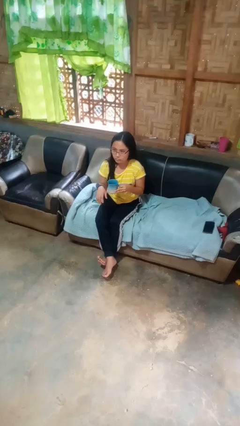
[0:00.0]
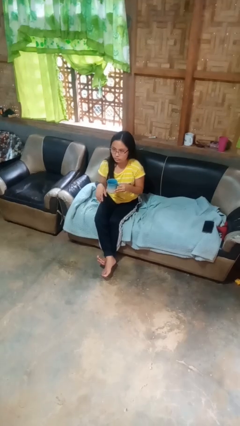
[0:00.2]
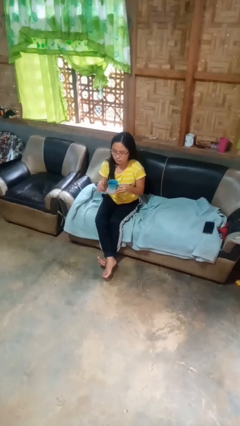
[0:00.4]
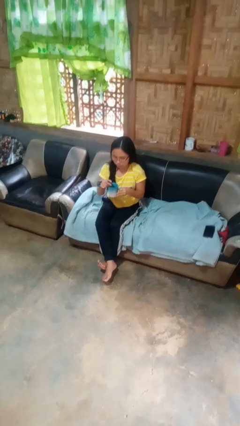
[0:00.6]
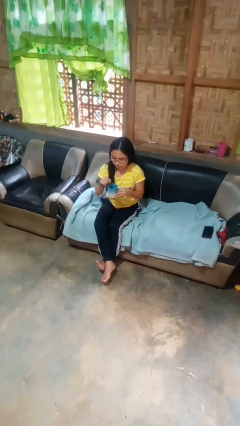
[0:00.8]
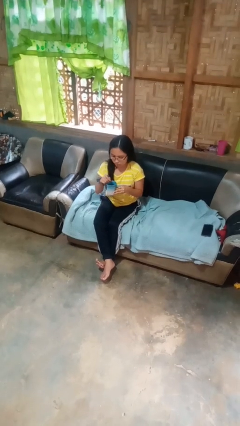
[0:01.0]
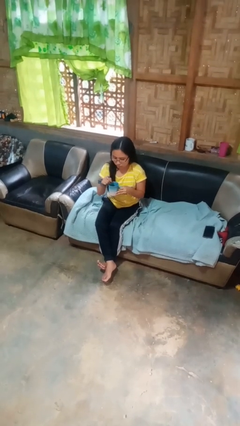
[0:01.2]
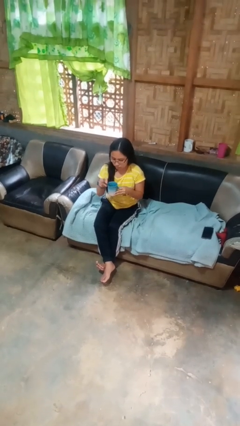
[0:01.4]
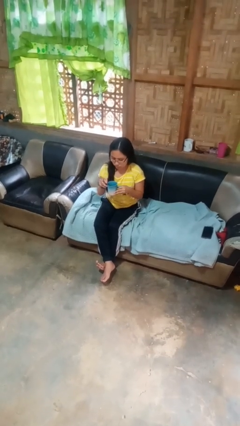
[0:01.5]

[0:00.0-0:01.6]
person stirs mug

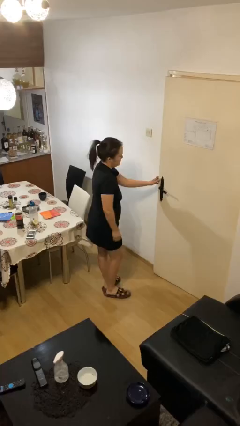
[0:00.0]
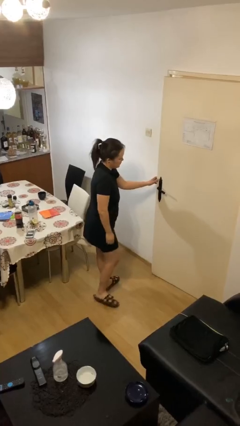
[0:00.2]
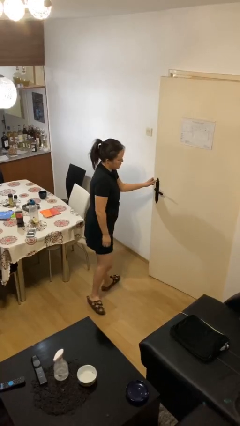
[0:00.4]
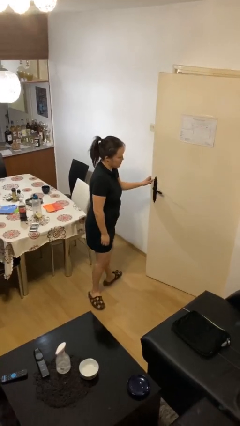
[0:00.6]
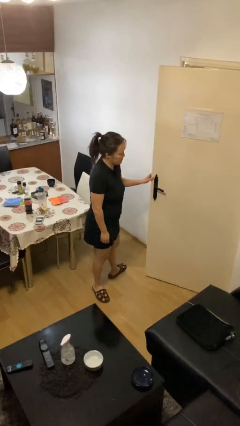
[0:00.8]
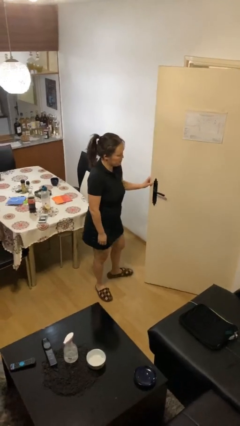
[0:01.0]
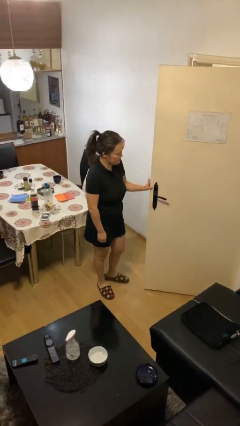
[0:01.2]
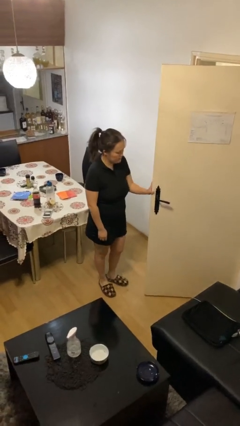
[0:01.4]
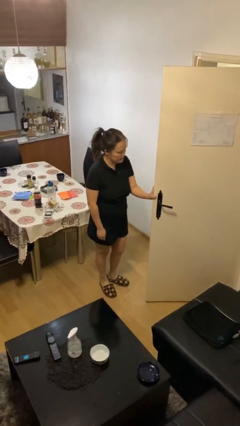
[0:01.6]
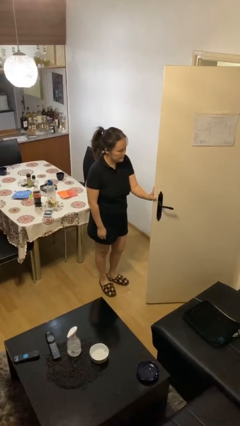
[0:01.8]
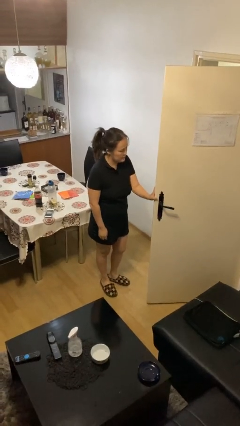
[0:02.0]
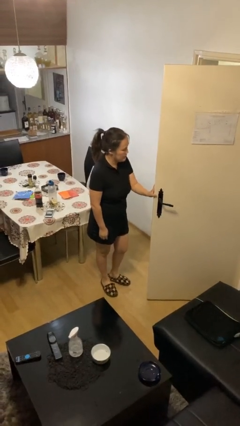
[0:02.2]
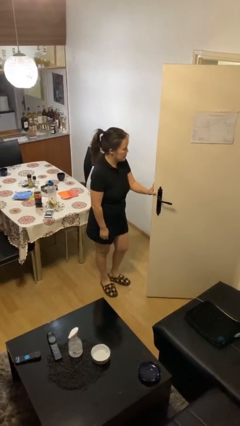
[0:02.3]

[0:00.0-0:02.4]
person opens facility door

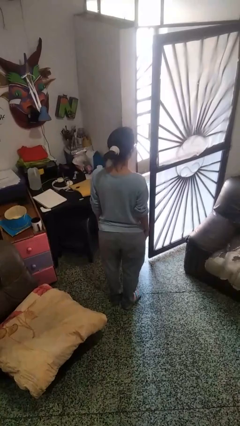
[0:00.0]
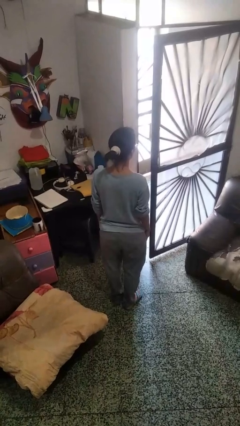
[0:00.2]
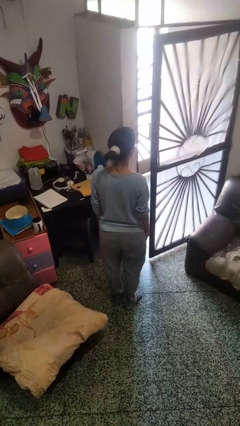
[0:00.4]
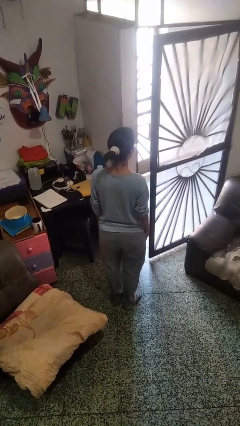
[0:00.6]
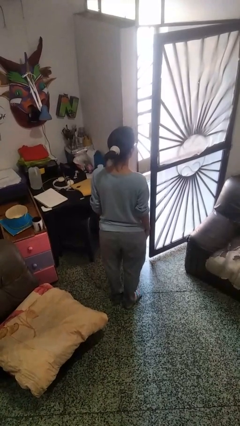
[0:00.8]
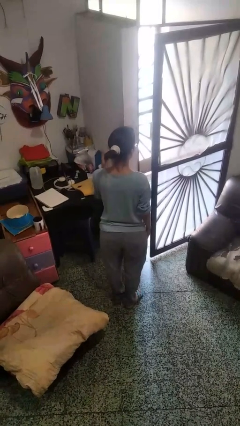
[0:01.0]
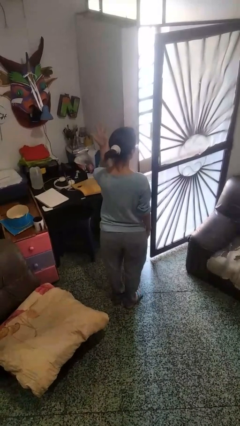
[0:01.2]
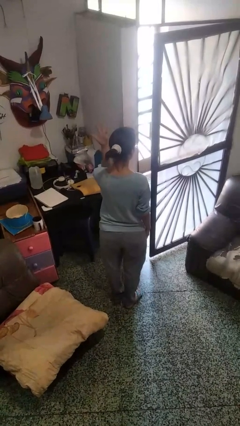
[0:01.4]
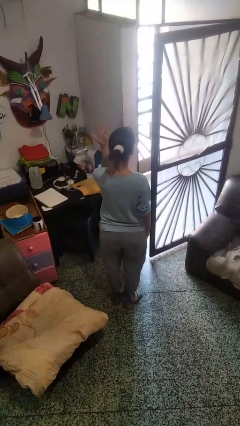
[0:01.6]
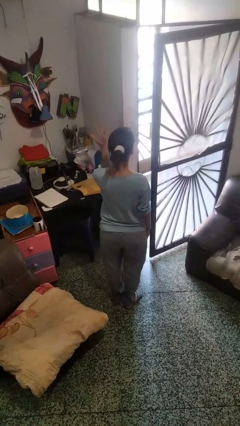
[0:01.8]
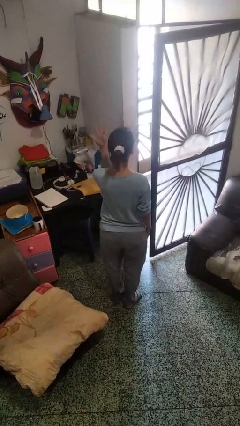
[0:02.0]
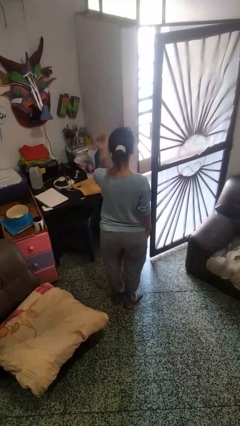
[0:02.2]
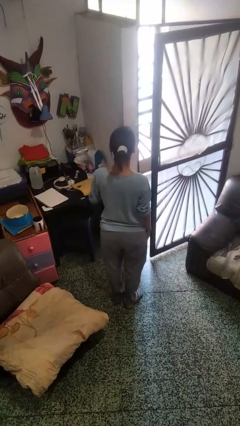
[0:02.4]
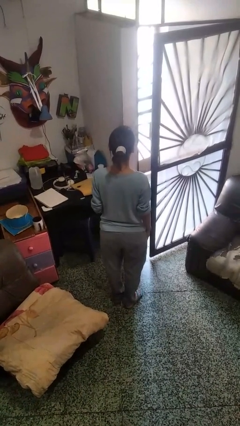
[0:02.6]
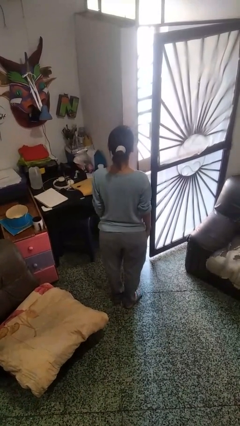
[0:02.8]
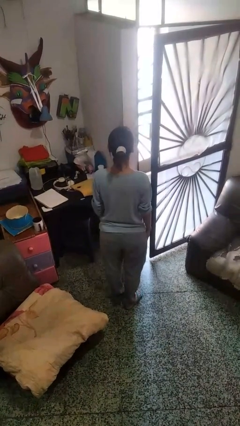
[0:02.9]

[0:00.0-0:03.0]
person gestures number five

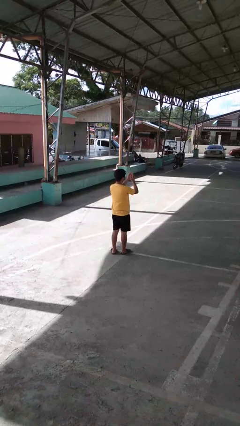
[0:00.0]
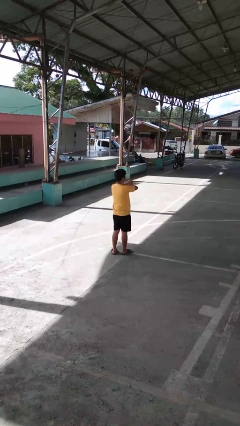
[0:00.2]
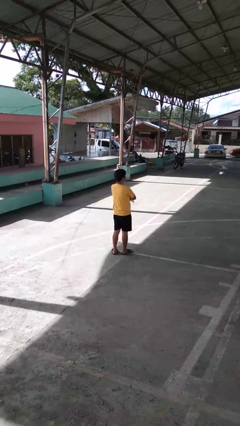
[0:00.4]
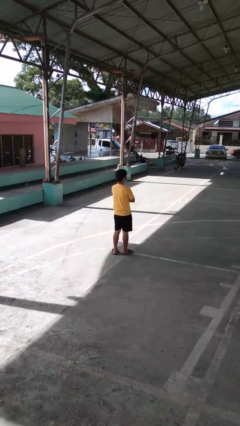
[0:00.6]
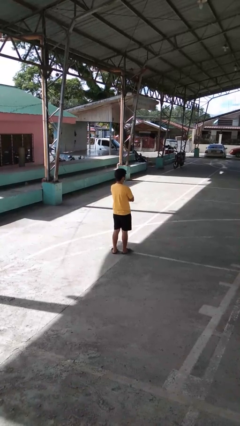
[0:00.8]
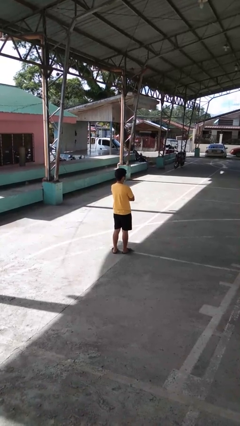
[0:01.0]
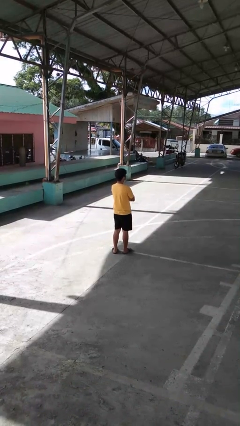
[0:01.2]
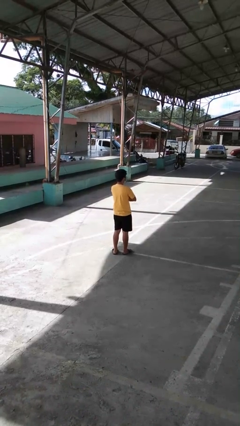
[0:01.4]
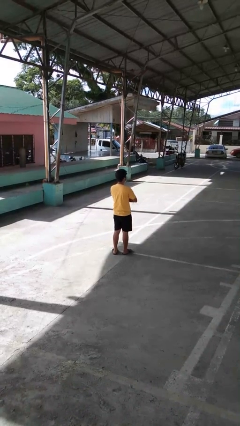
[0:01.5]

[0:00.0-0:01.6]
person crosses arms

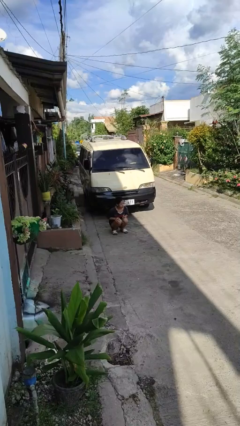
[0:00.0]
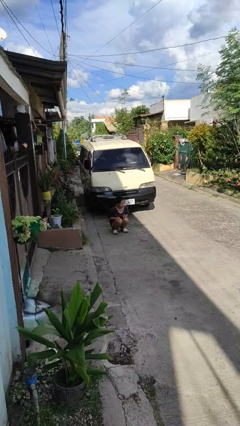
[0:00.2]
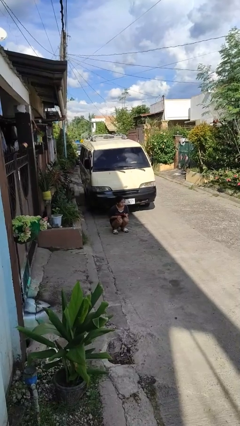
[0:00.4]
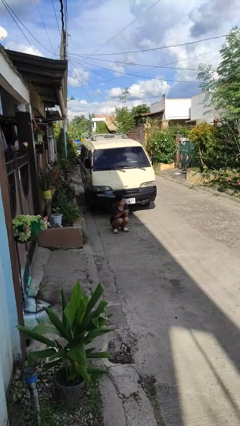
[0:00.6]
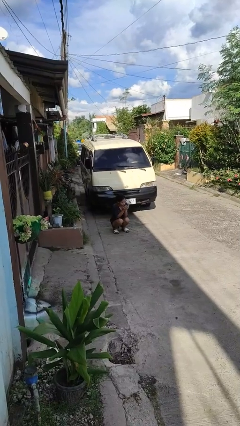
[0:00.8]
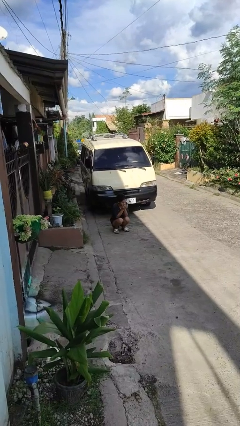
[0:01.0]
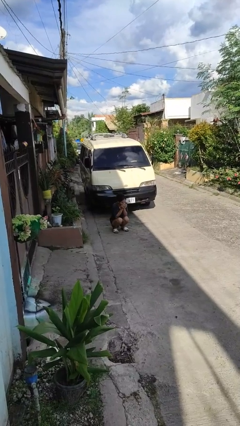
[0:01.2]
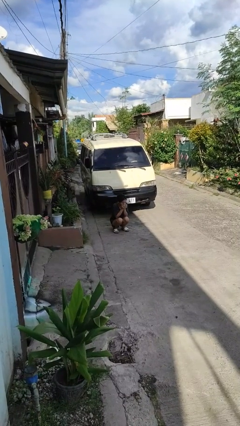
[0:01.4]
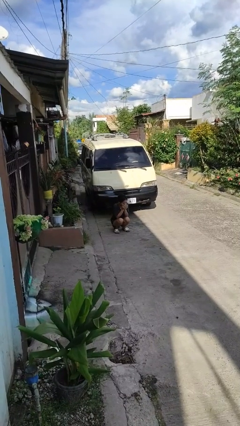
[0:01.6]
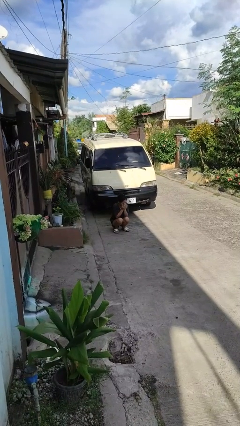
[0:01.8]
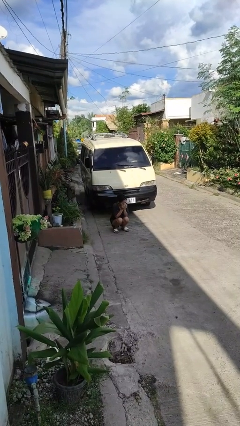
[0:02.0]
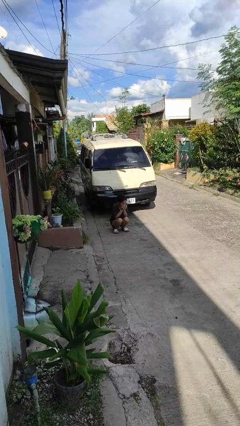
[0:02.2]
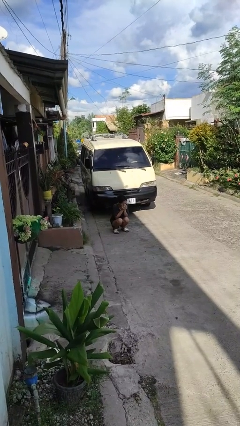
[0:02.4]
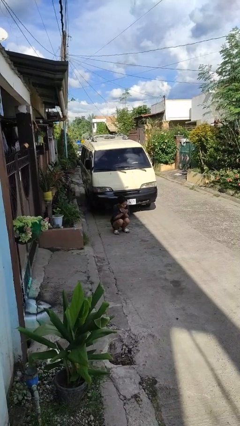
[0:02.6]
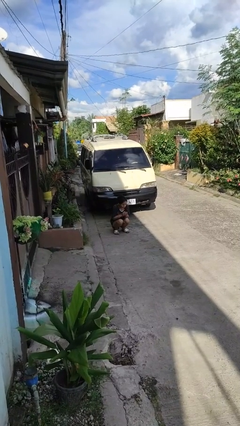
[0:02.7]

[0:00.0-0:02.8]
person blows into hands

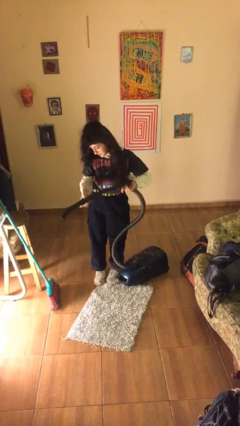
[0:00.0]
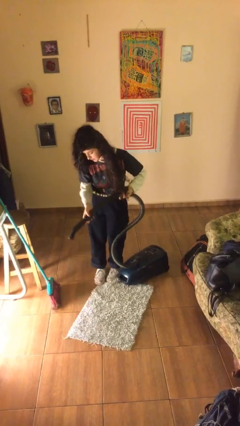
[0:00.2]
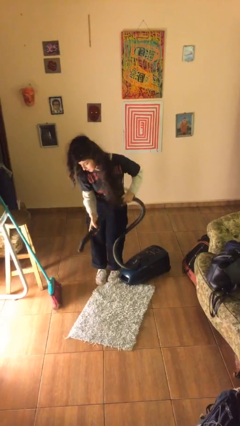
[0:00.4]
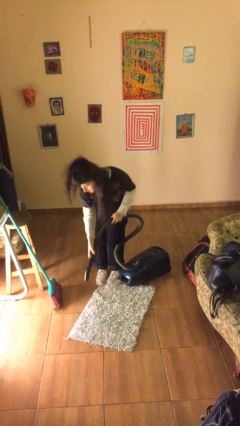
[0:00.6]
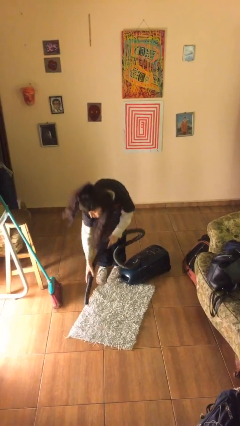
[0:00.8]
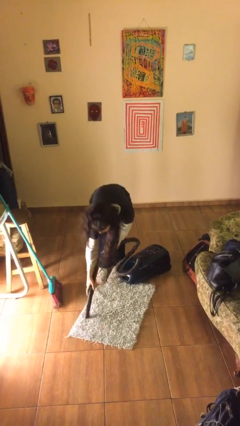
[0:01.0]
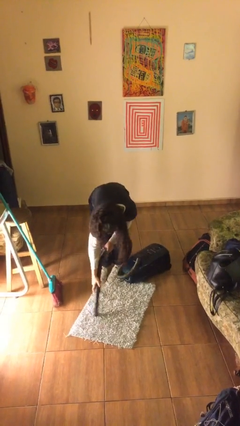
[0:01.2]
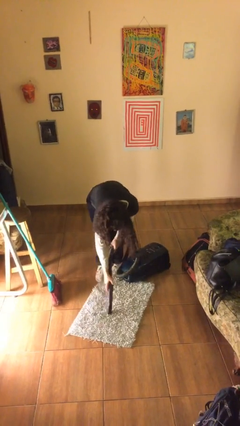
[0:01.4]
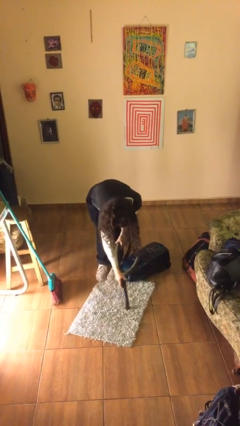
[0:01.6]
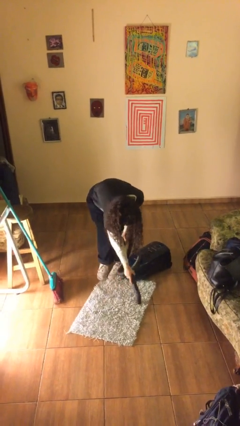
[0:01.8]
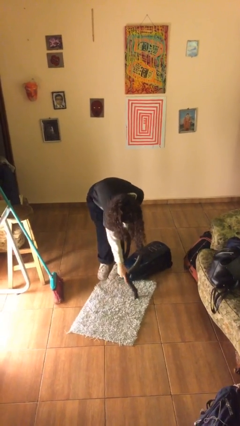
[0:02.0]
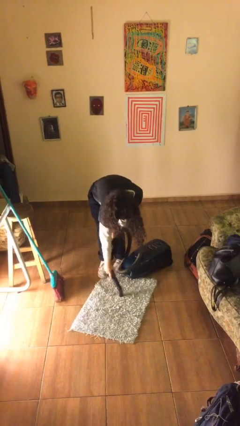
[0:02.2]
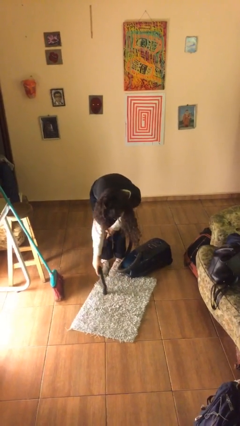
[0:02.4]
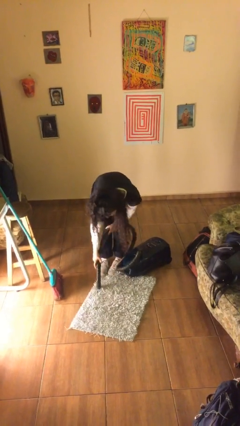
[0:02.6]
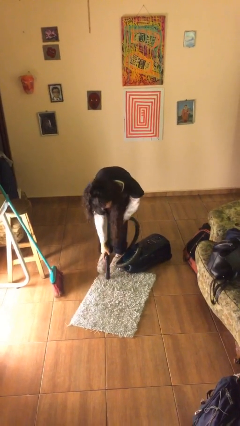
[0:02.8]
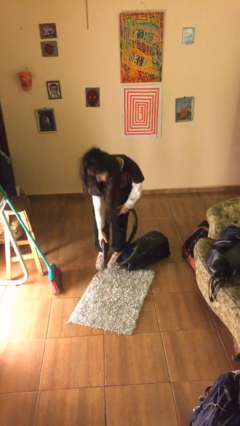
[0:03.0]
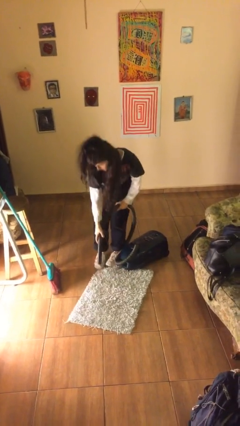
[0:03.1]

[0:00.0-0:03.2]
person vacuums carpet

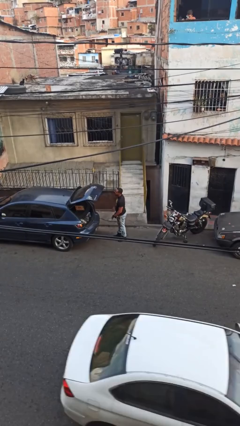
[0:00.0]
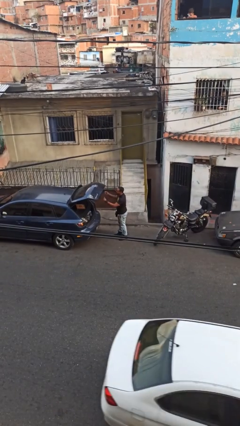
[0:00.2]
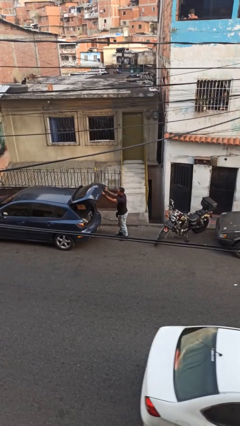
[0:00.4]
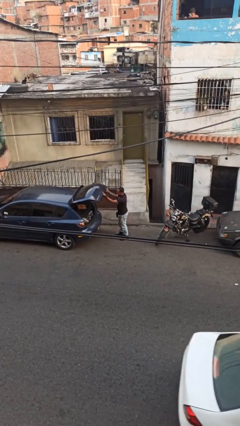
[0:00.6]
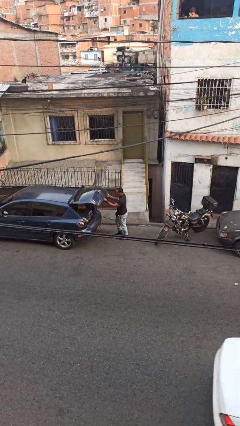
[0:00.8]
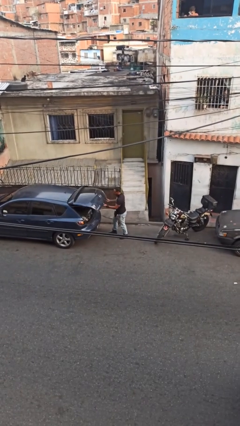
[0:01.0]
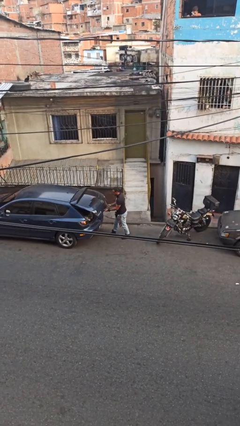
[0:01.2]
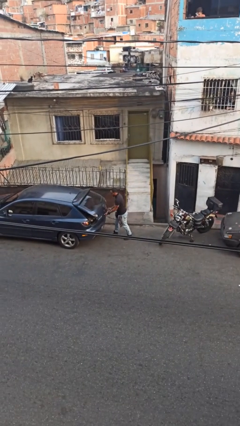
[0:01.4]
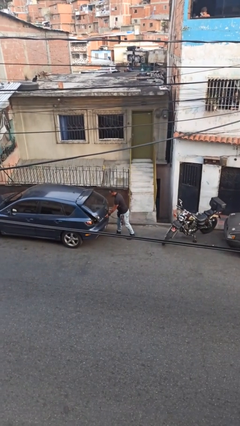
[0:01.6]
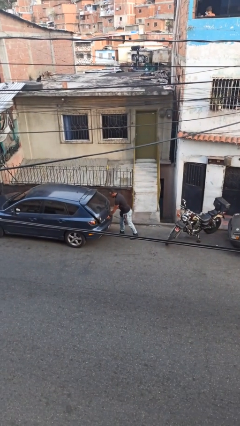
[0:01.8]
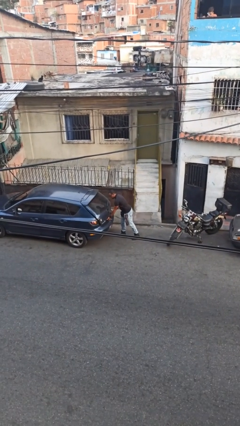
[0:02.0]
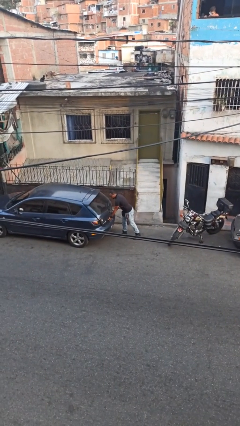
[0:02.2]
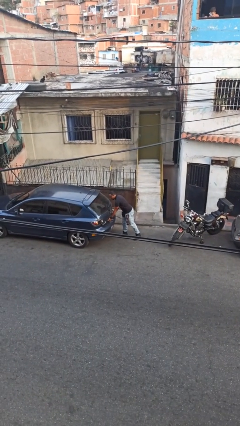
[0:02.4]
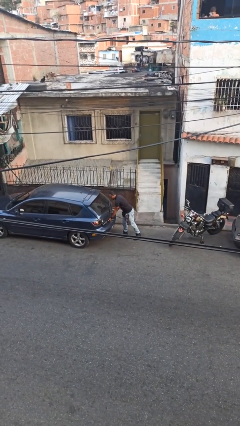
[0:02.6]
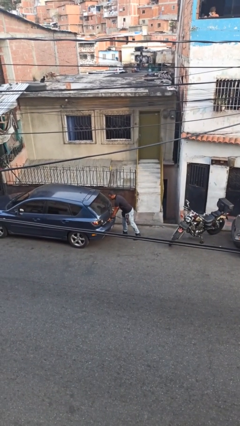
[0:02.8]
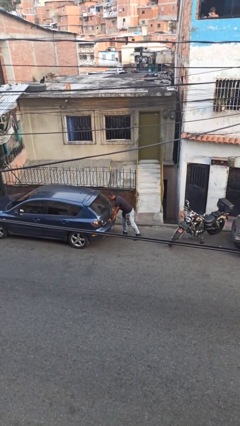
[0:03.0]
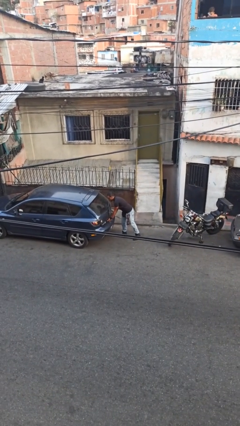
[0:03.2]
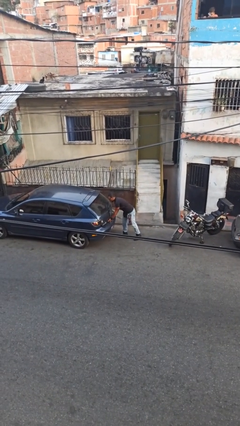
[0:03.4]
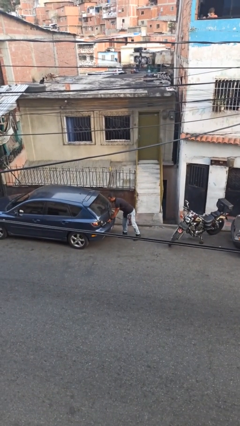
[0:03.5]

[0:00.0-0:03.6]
person closes car trunk
